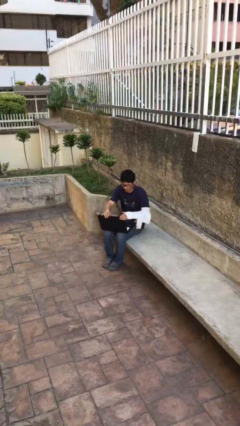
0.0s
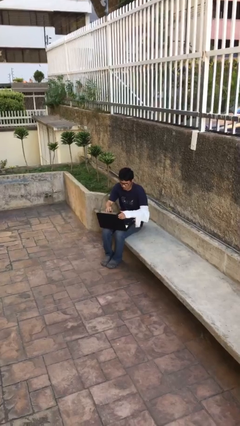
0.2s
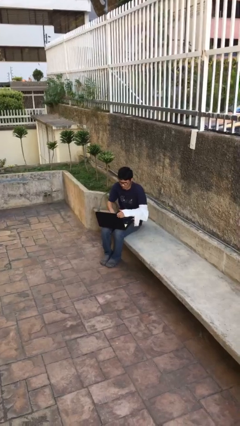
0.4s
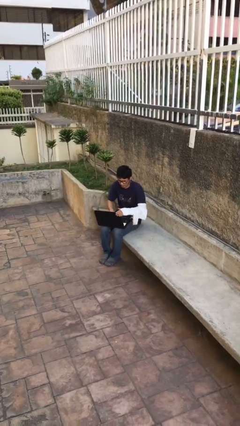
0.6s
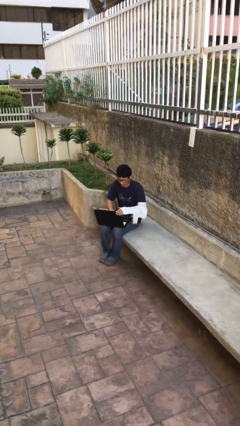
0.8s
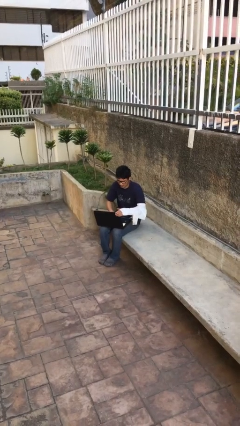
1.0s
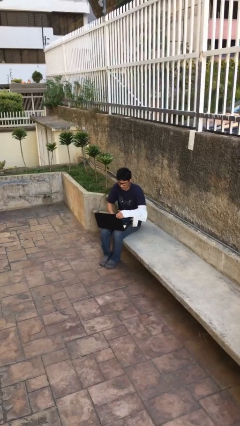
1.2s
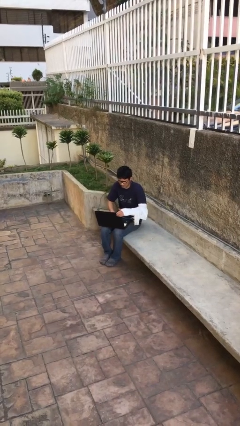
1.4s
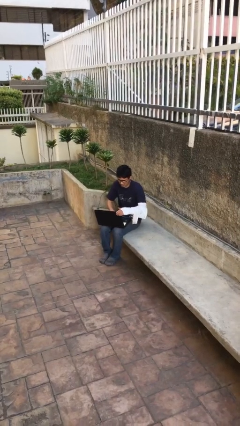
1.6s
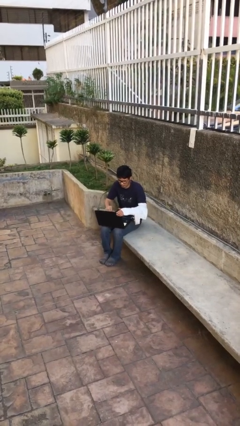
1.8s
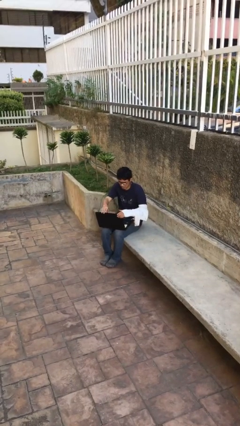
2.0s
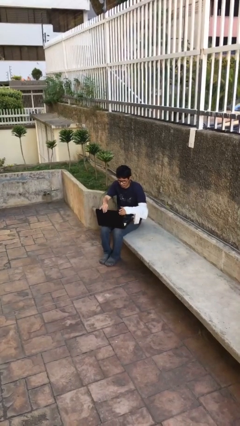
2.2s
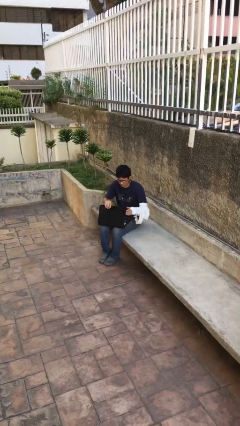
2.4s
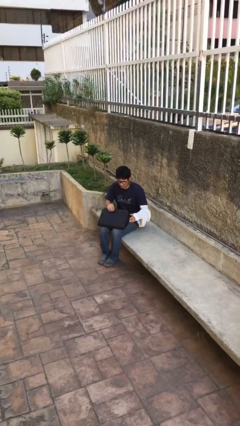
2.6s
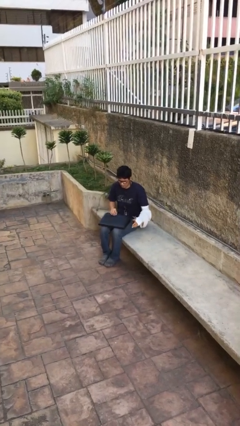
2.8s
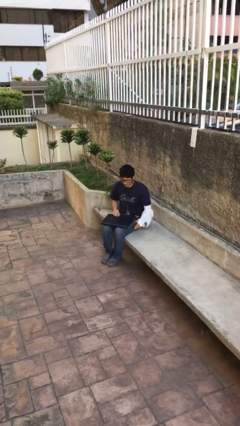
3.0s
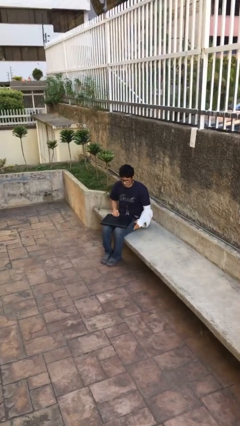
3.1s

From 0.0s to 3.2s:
person interacts with laptop

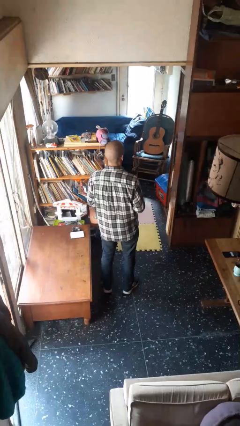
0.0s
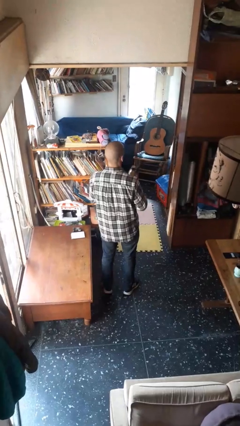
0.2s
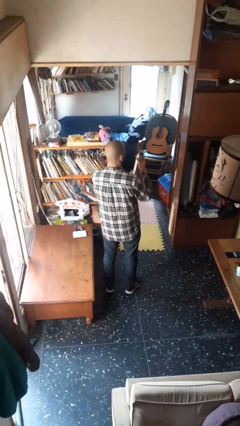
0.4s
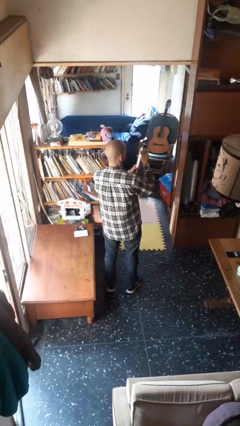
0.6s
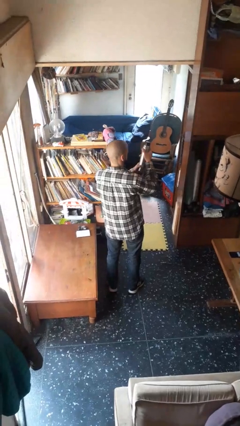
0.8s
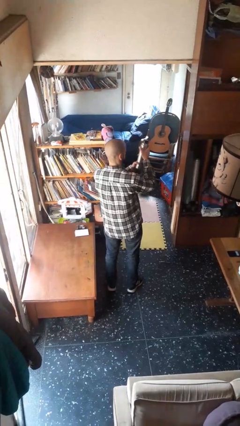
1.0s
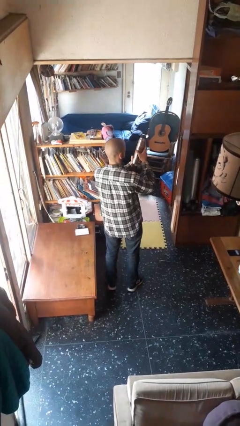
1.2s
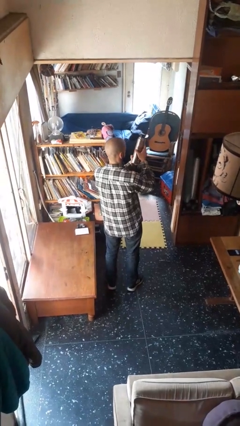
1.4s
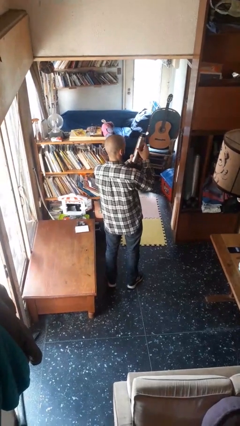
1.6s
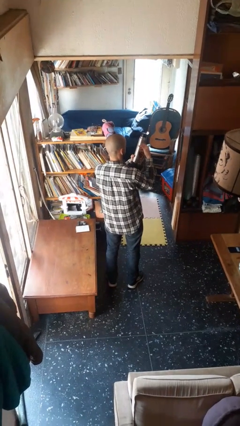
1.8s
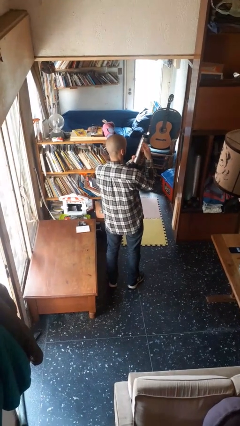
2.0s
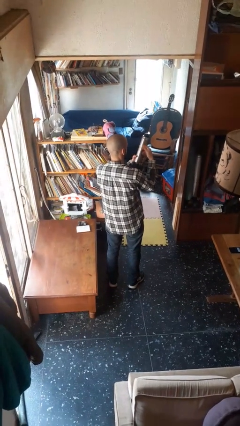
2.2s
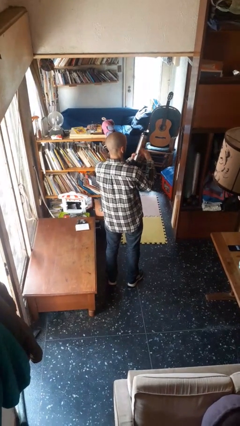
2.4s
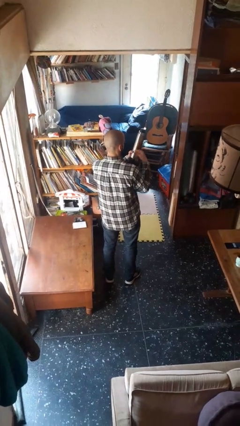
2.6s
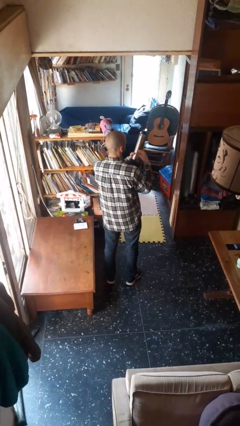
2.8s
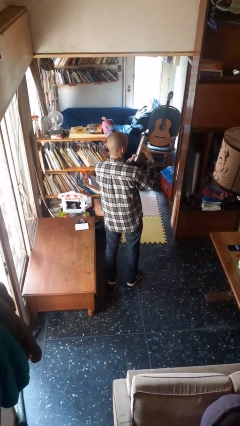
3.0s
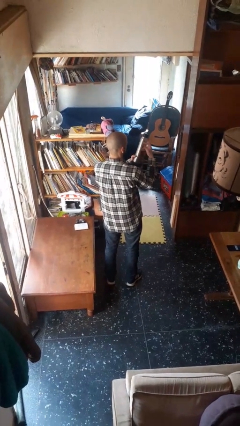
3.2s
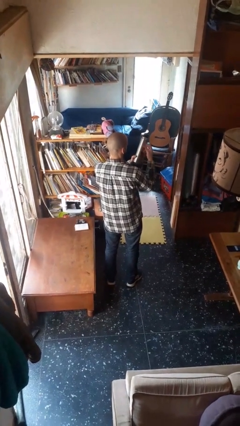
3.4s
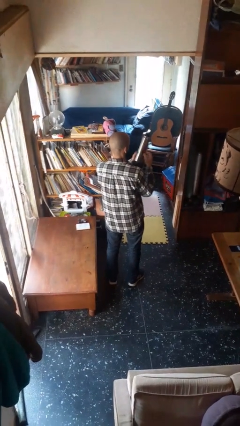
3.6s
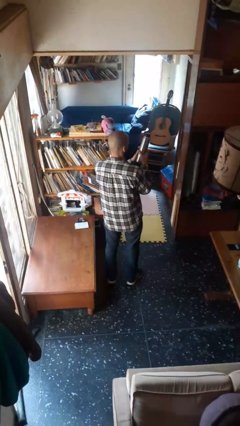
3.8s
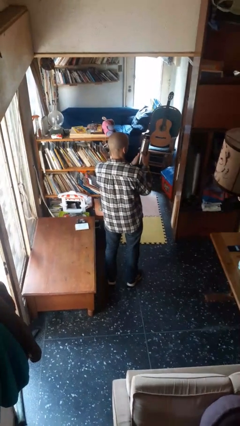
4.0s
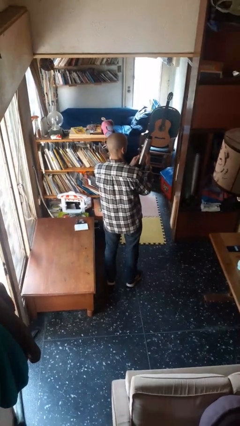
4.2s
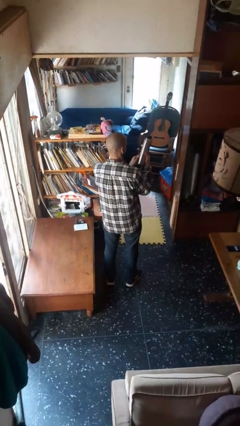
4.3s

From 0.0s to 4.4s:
person taps object with finger

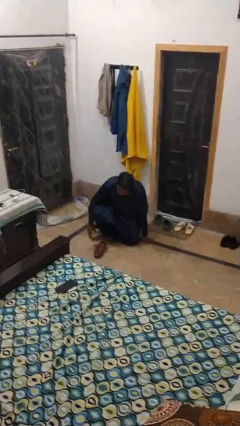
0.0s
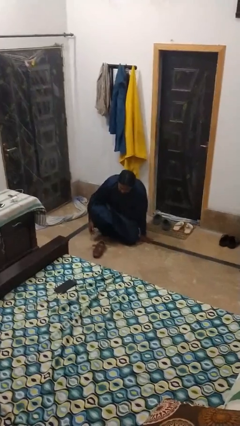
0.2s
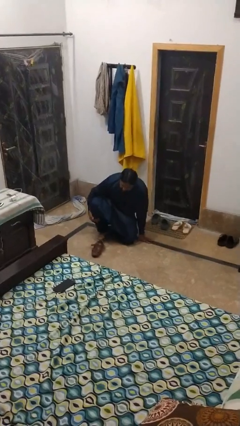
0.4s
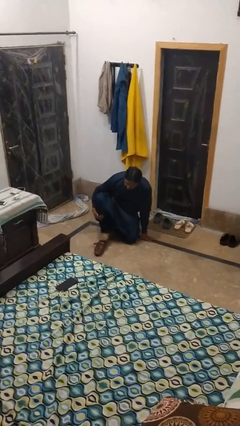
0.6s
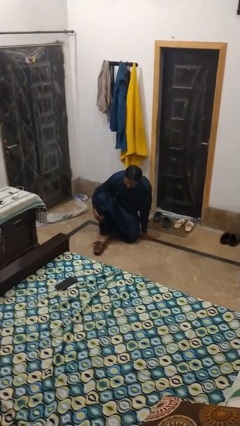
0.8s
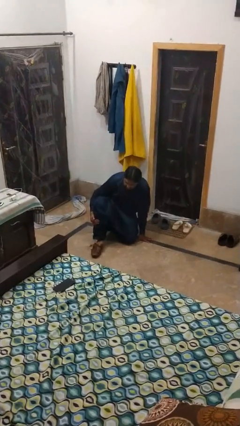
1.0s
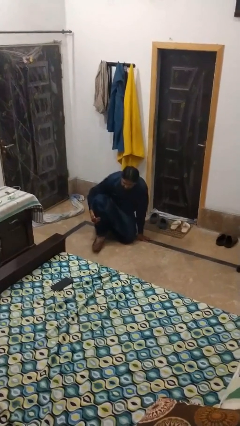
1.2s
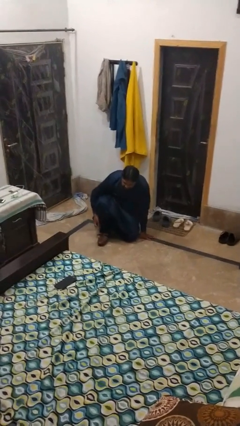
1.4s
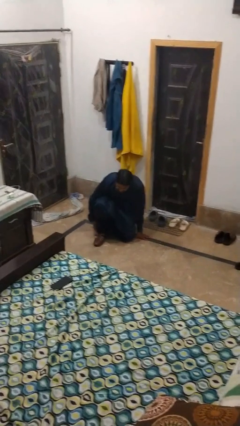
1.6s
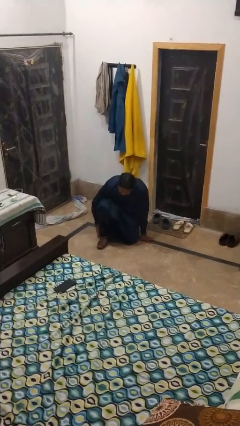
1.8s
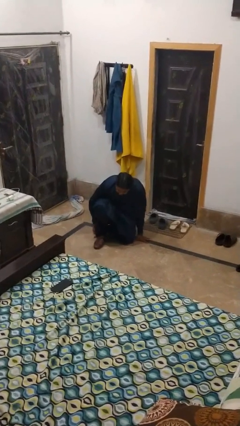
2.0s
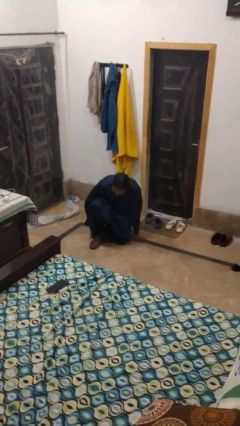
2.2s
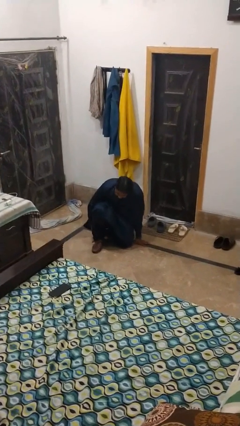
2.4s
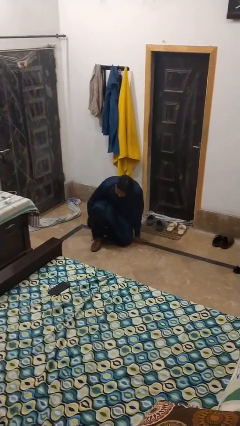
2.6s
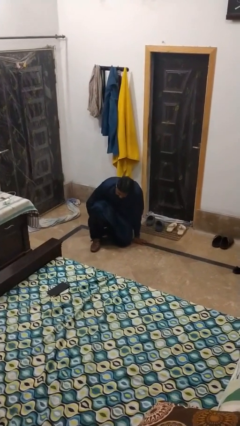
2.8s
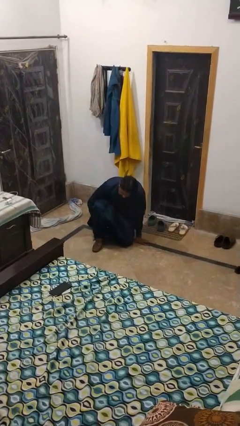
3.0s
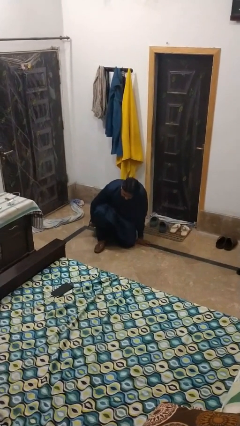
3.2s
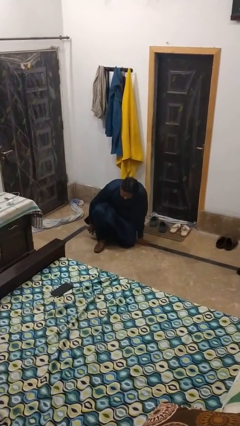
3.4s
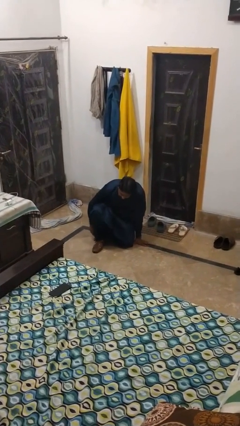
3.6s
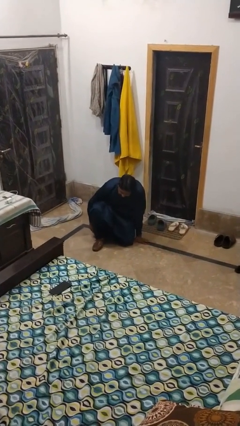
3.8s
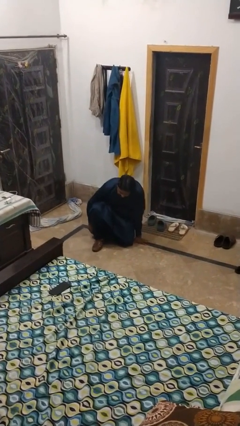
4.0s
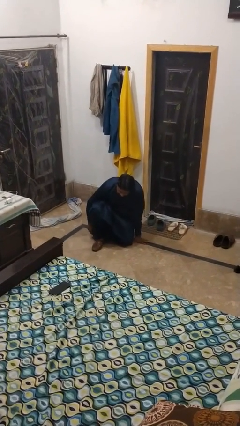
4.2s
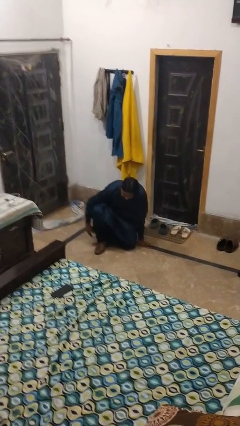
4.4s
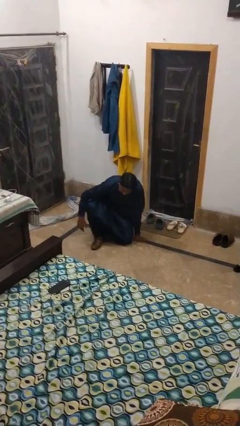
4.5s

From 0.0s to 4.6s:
person puts on shoes

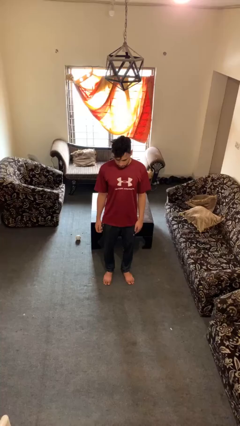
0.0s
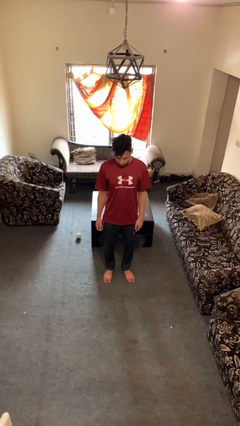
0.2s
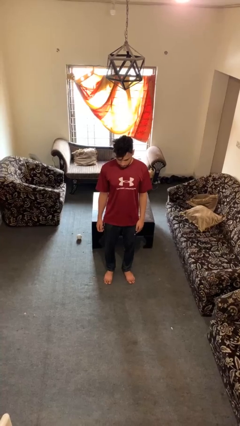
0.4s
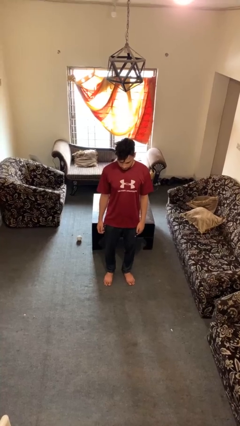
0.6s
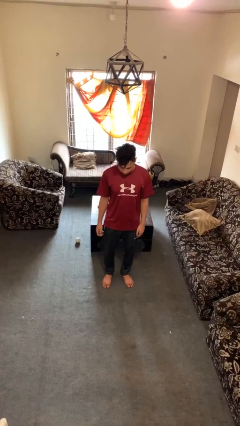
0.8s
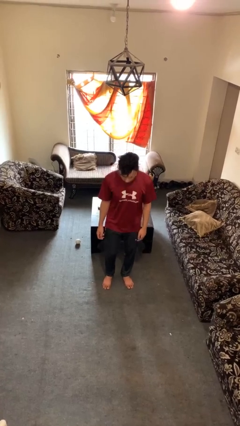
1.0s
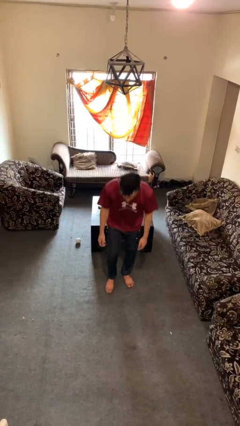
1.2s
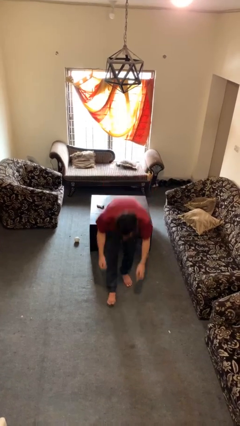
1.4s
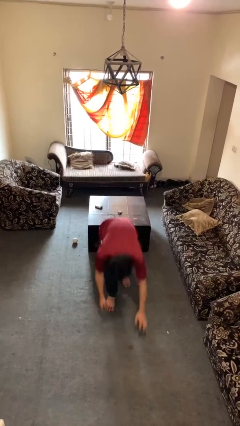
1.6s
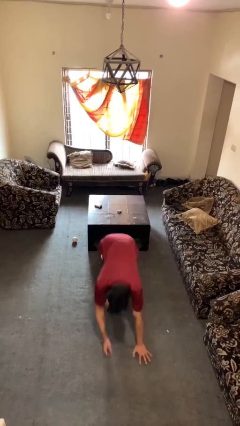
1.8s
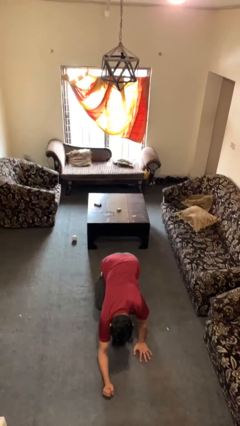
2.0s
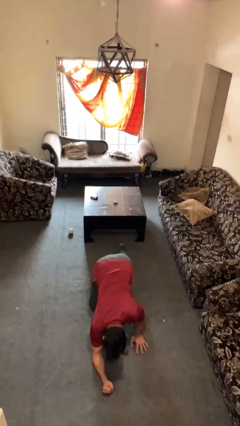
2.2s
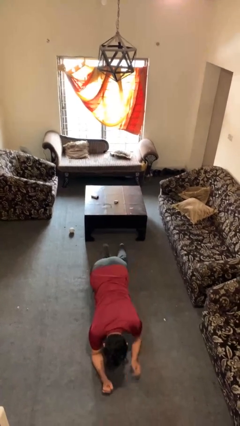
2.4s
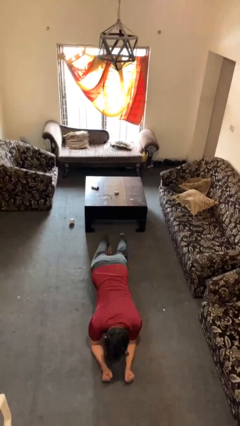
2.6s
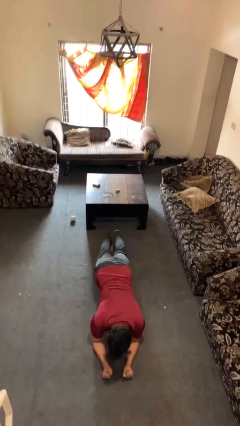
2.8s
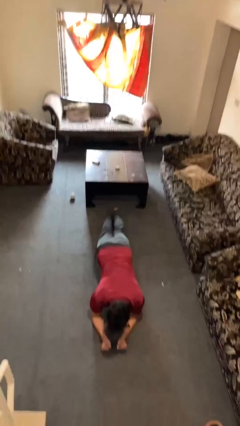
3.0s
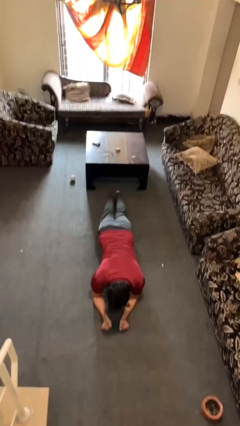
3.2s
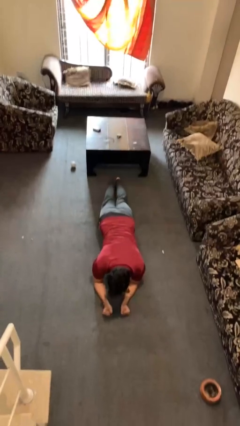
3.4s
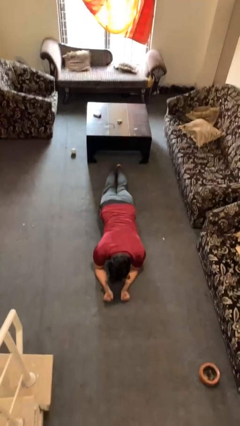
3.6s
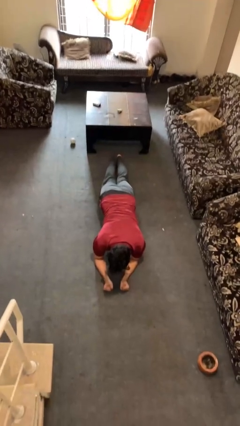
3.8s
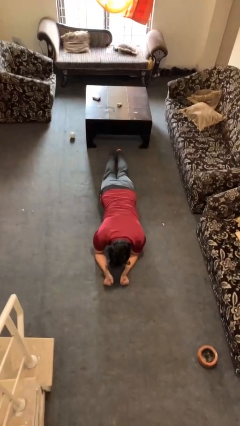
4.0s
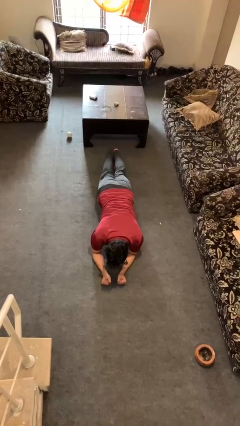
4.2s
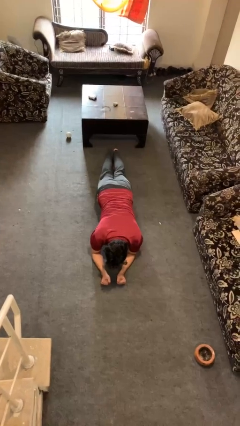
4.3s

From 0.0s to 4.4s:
person exercises with plank

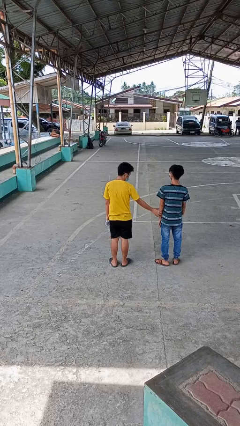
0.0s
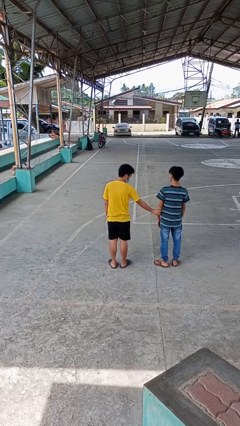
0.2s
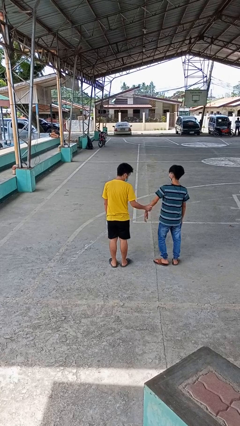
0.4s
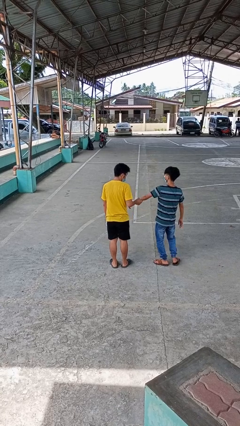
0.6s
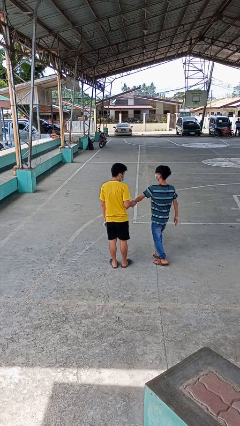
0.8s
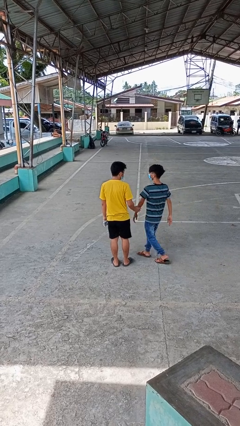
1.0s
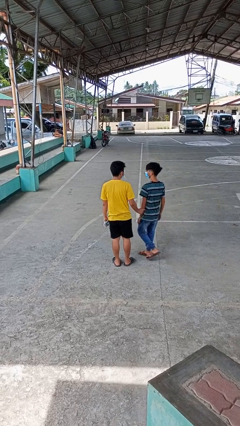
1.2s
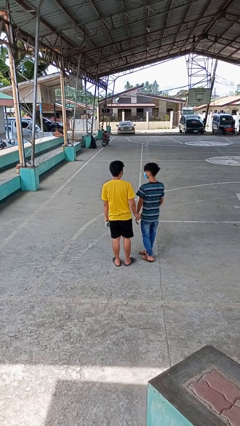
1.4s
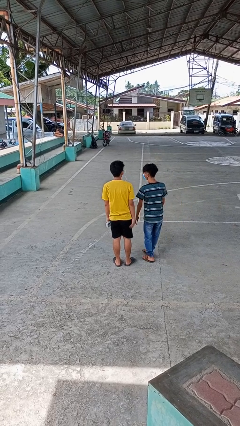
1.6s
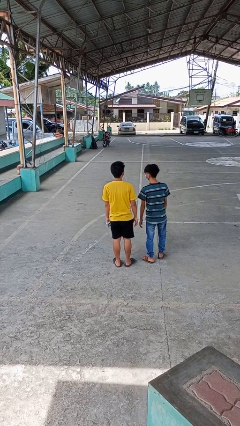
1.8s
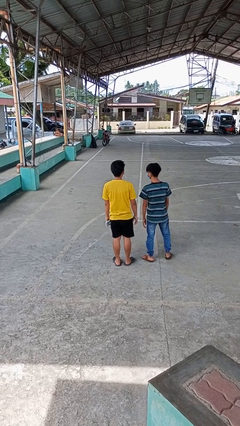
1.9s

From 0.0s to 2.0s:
person grabs person by forearm
